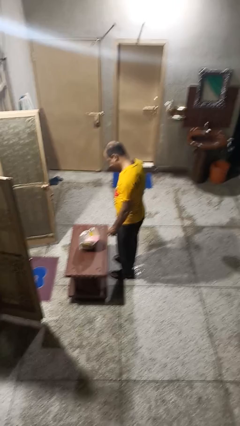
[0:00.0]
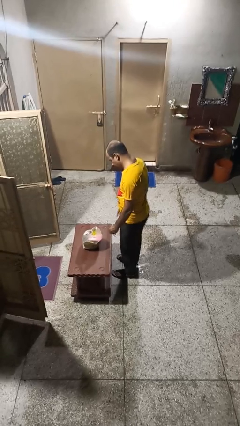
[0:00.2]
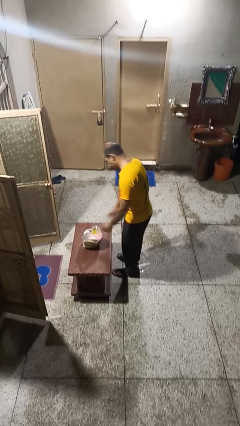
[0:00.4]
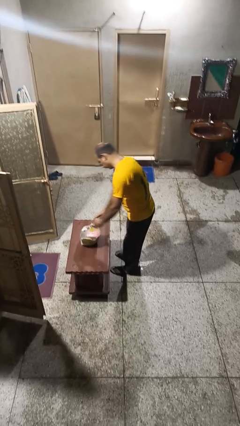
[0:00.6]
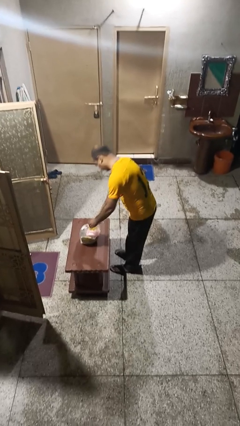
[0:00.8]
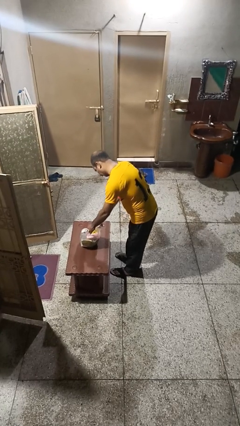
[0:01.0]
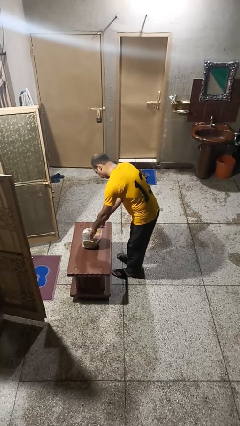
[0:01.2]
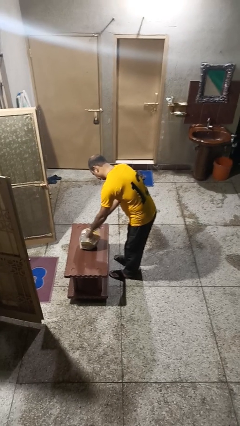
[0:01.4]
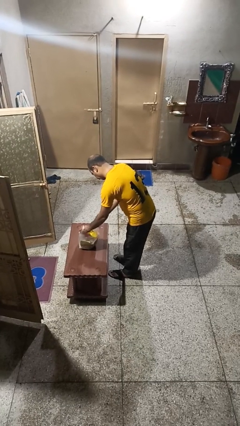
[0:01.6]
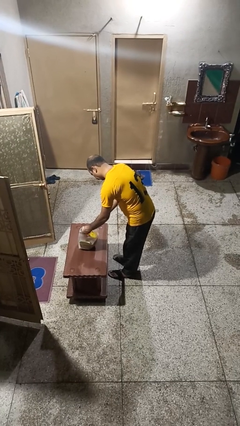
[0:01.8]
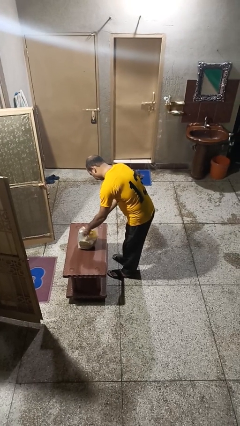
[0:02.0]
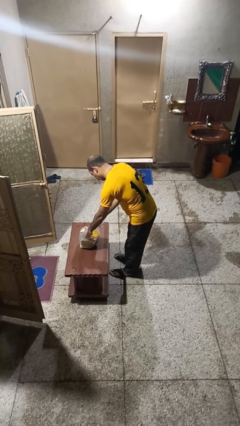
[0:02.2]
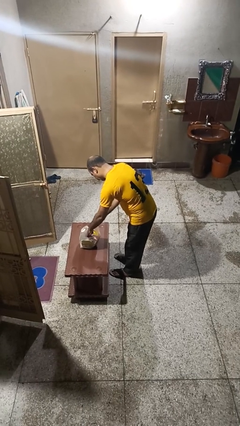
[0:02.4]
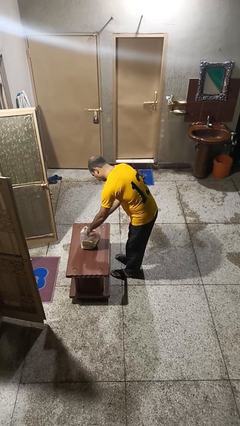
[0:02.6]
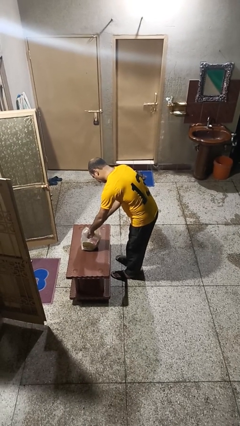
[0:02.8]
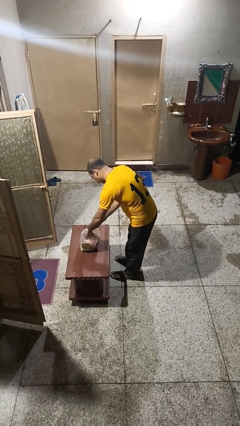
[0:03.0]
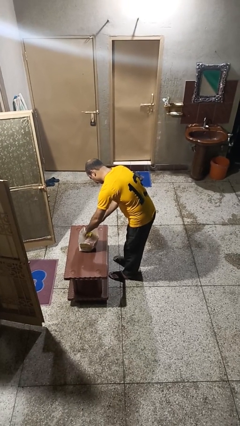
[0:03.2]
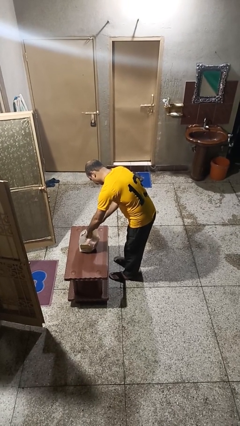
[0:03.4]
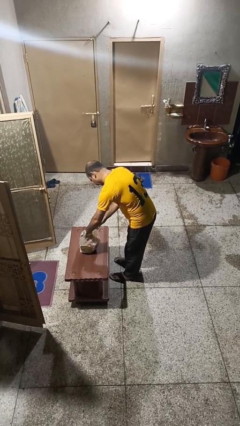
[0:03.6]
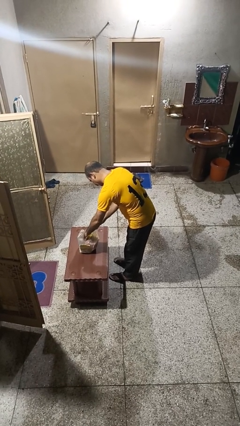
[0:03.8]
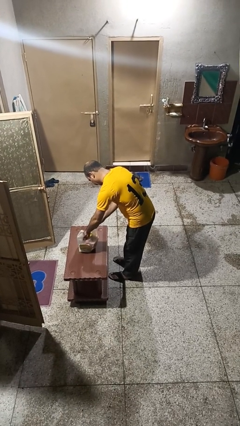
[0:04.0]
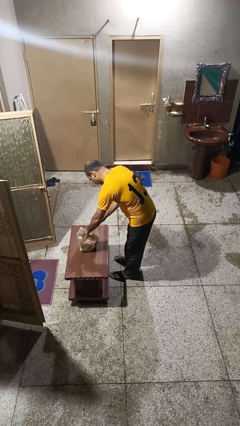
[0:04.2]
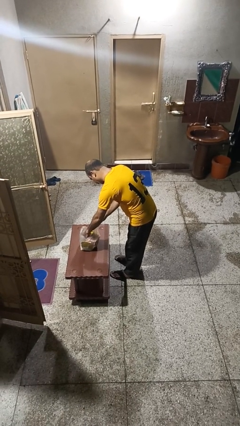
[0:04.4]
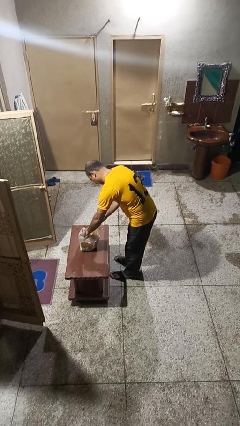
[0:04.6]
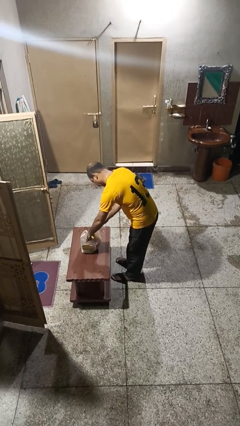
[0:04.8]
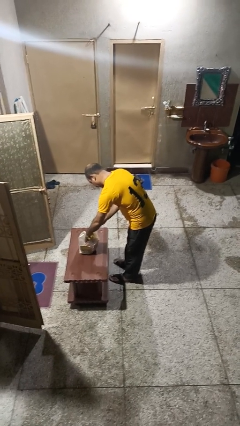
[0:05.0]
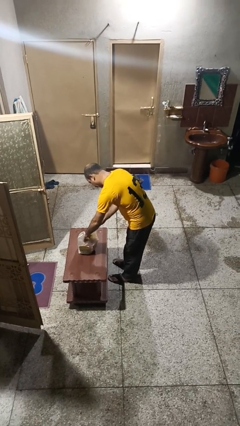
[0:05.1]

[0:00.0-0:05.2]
person searches in bag

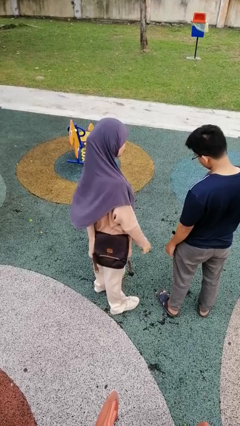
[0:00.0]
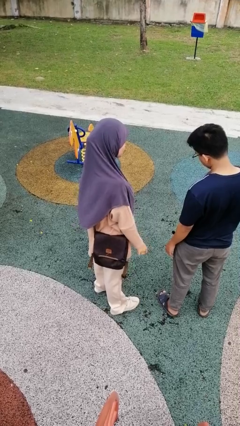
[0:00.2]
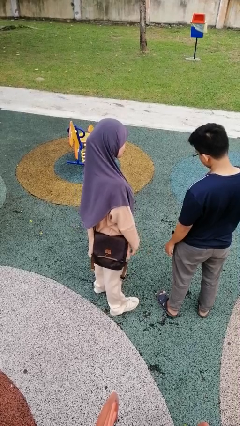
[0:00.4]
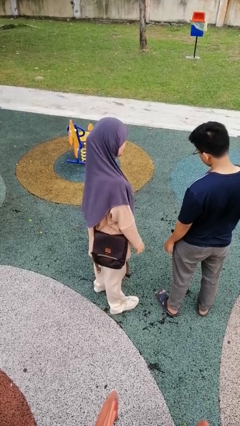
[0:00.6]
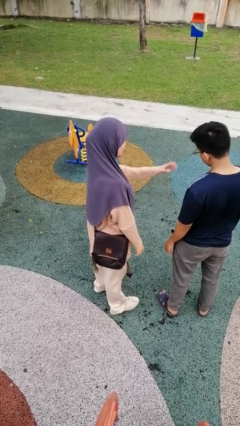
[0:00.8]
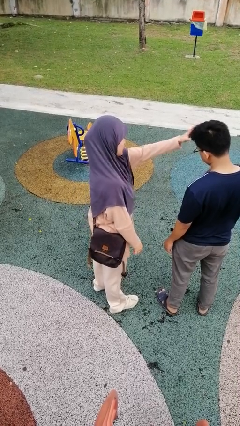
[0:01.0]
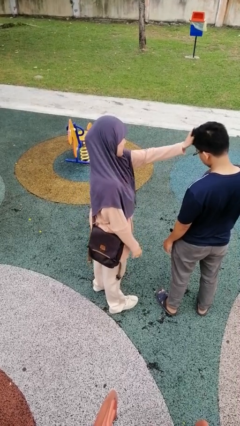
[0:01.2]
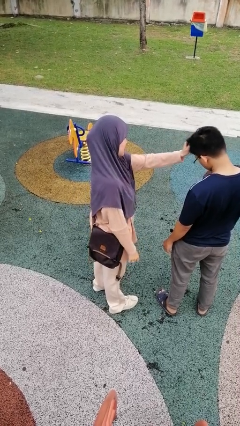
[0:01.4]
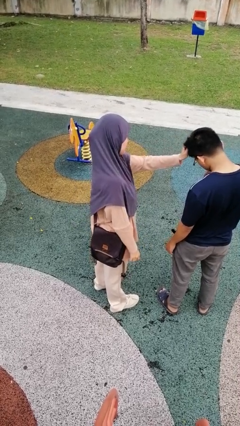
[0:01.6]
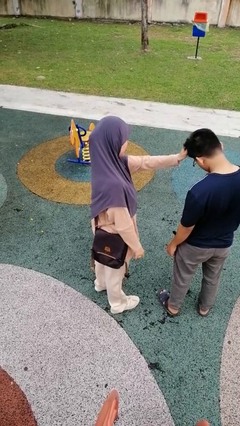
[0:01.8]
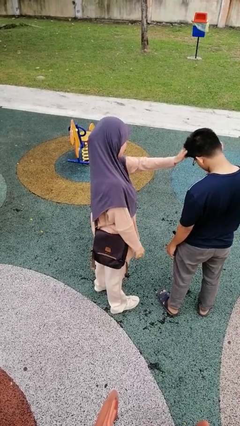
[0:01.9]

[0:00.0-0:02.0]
person grabs person by hair

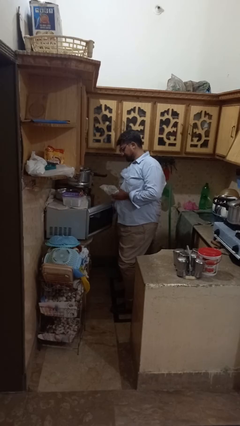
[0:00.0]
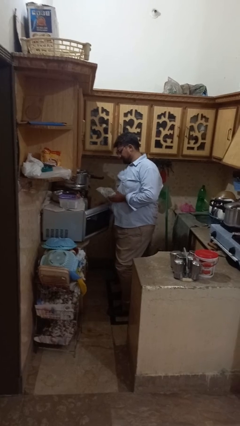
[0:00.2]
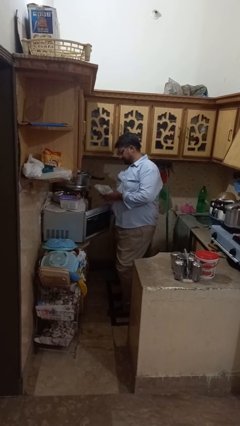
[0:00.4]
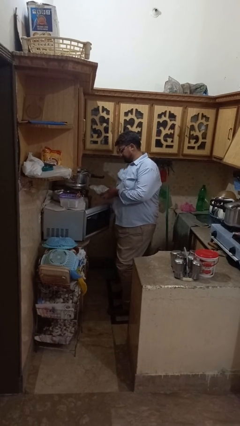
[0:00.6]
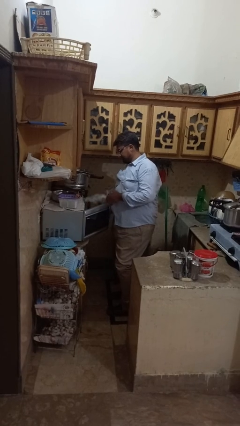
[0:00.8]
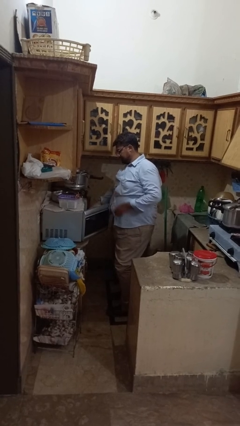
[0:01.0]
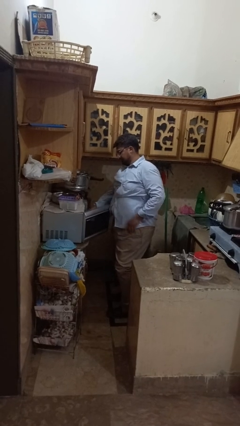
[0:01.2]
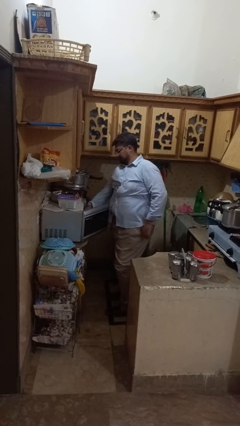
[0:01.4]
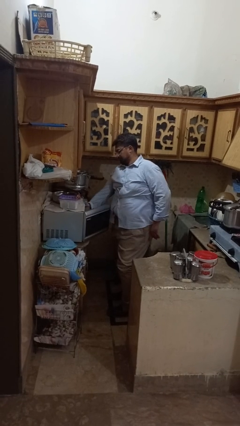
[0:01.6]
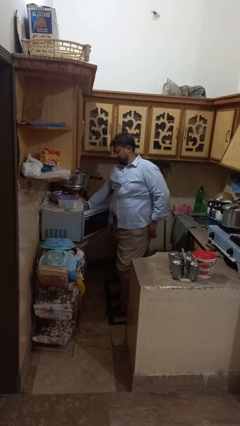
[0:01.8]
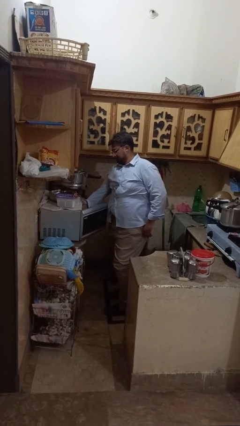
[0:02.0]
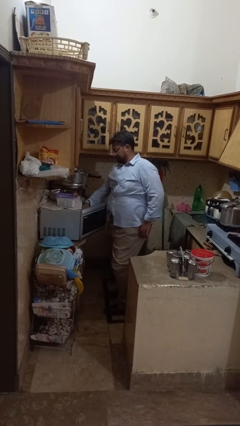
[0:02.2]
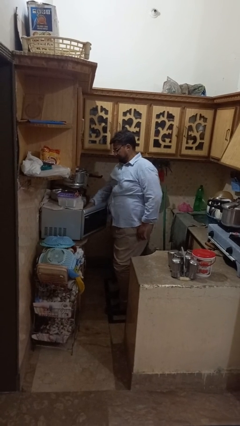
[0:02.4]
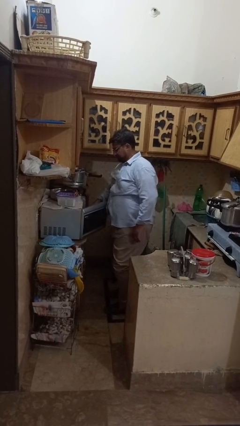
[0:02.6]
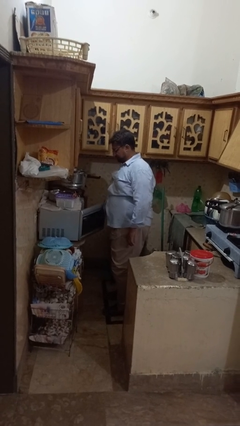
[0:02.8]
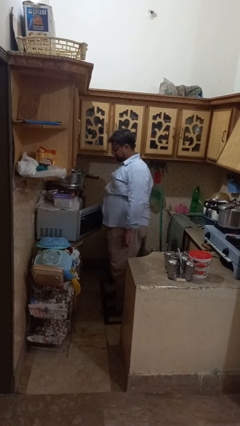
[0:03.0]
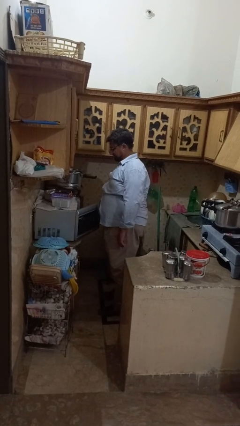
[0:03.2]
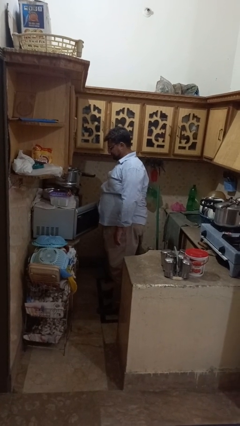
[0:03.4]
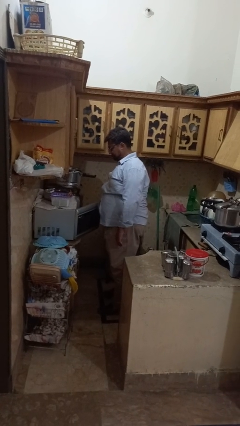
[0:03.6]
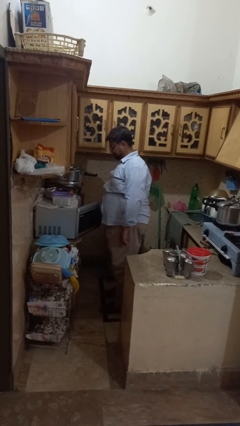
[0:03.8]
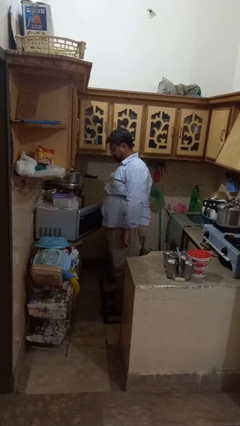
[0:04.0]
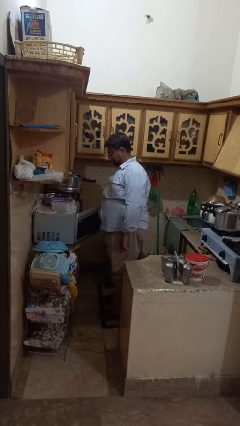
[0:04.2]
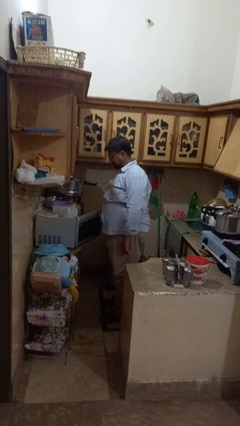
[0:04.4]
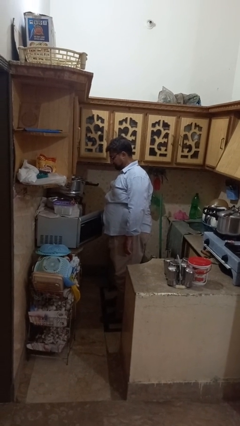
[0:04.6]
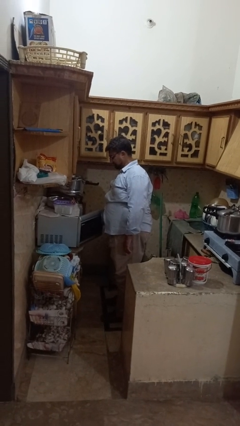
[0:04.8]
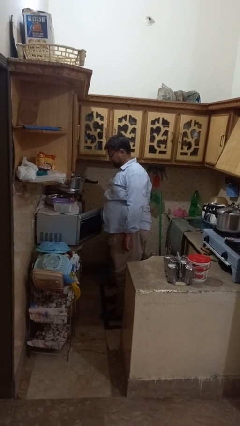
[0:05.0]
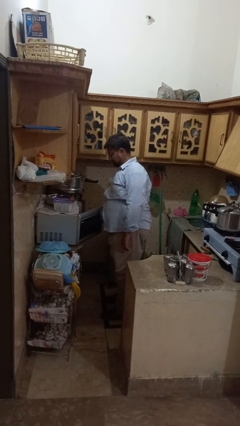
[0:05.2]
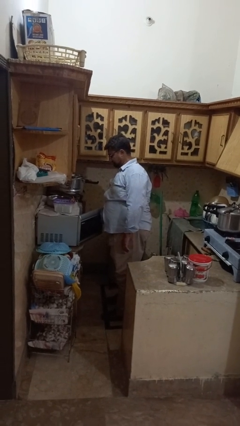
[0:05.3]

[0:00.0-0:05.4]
person puts object into microwave

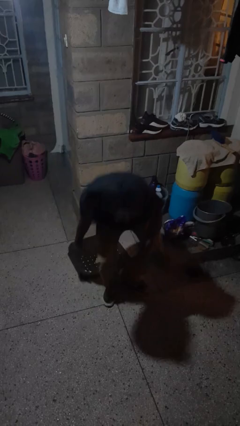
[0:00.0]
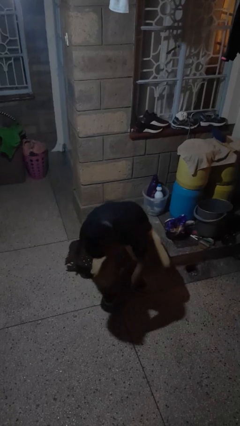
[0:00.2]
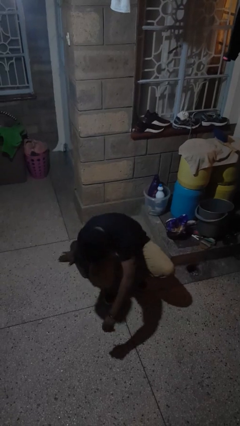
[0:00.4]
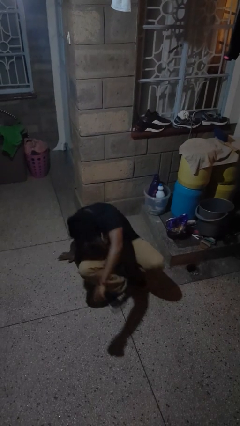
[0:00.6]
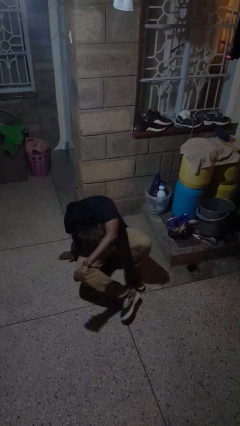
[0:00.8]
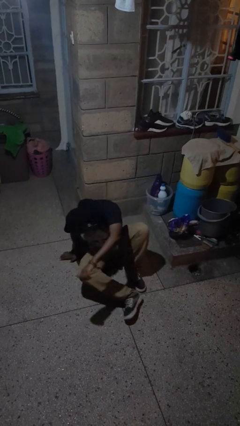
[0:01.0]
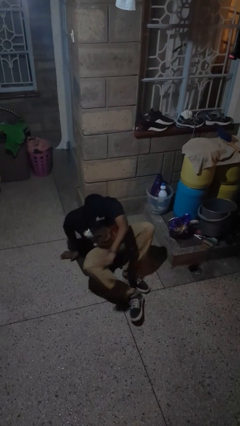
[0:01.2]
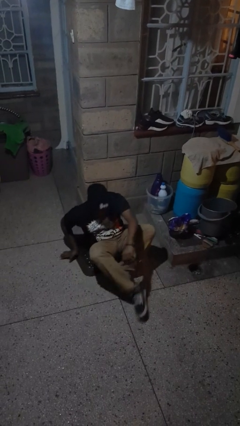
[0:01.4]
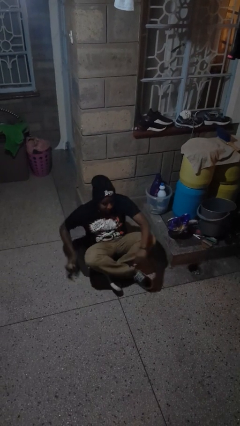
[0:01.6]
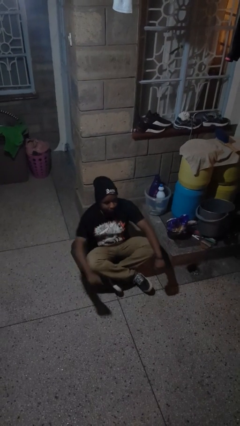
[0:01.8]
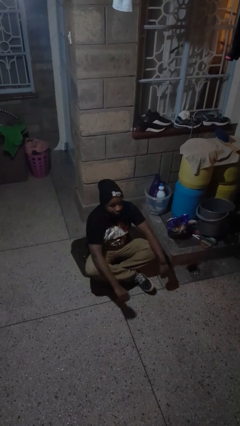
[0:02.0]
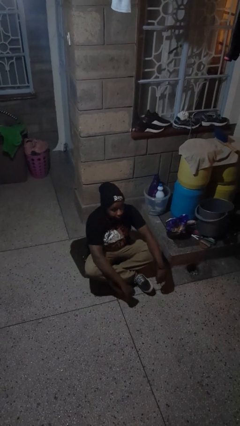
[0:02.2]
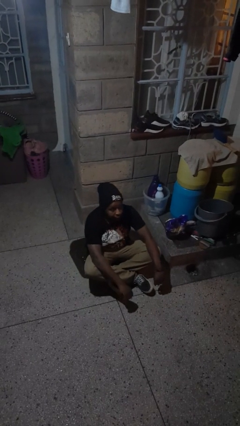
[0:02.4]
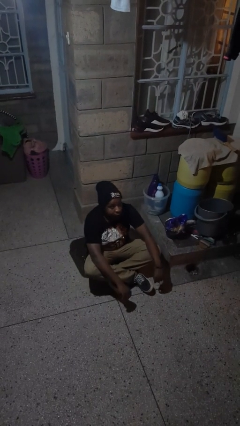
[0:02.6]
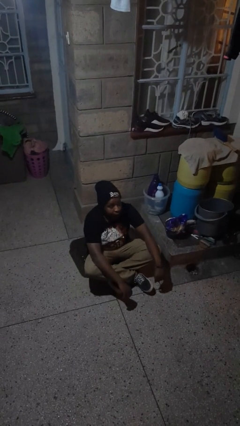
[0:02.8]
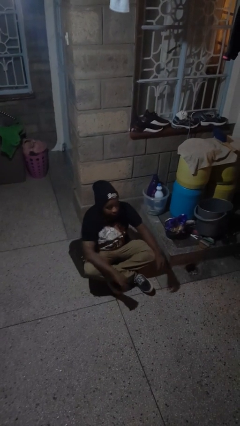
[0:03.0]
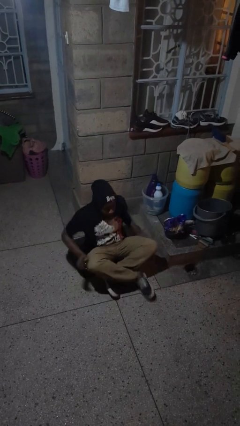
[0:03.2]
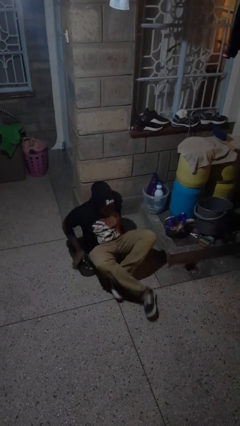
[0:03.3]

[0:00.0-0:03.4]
person sits crisscross

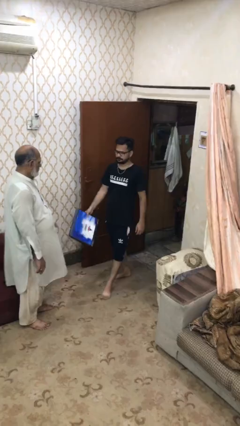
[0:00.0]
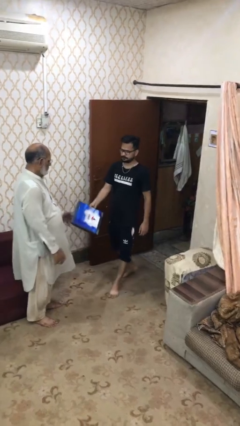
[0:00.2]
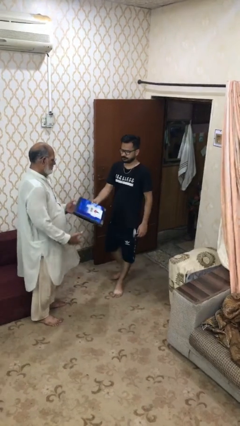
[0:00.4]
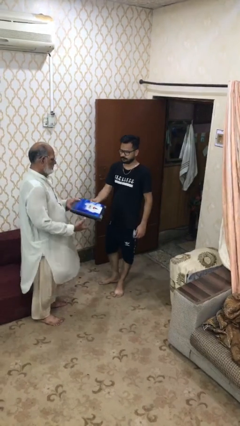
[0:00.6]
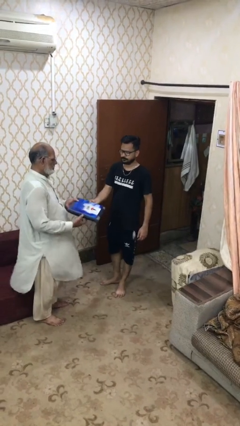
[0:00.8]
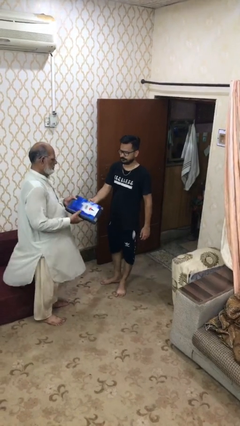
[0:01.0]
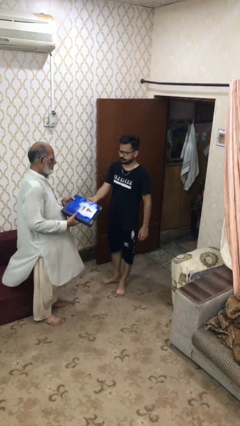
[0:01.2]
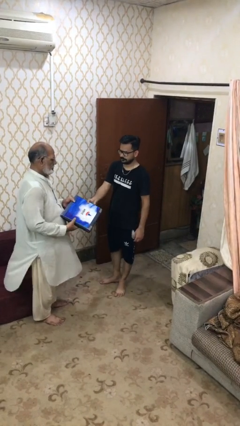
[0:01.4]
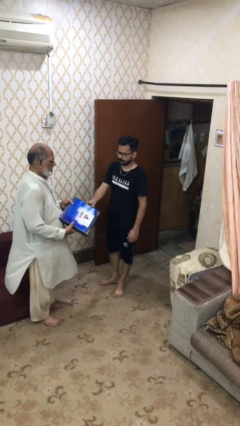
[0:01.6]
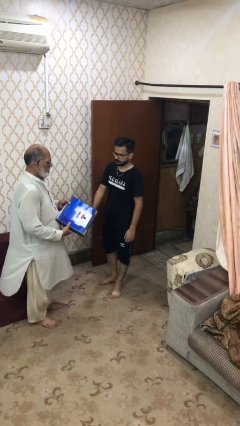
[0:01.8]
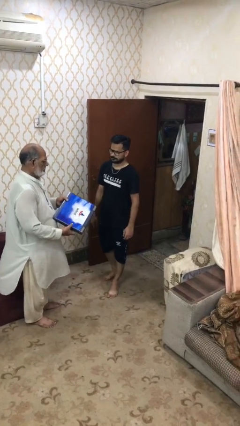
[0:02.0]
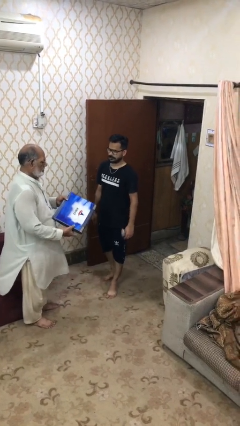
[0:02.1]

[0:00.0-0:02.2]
person transfers object to person
